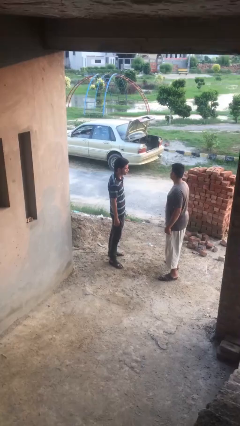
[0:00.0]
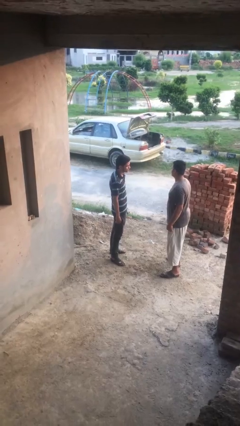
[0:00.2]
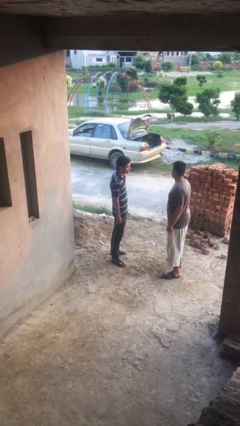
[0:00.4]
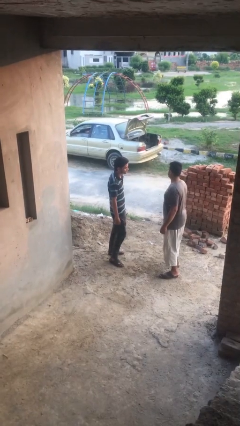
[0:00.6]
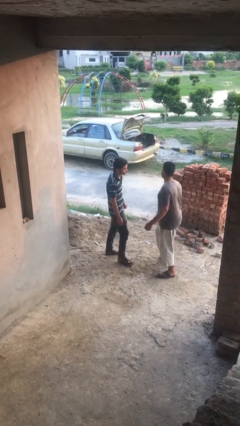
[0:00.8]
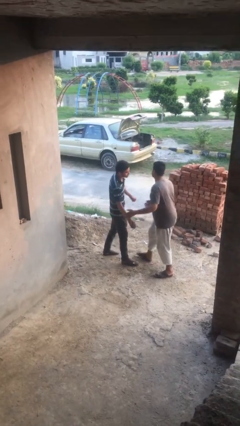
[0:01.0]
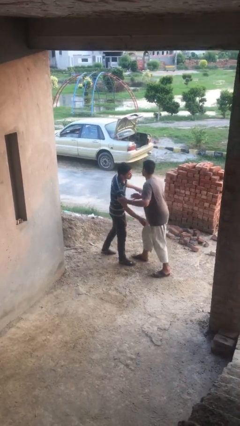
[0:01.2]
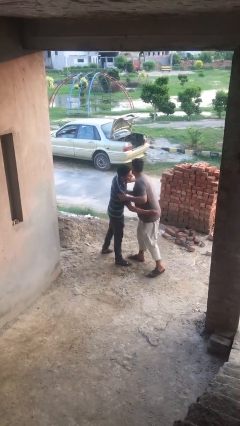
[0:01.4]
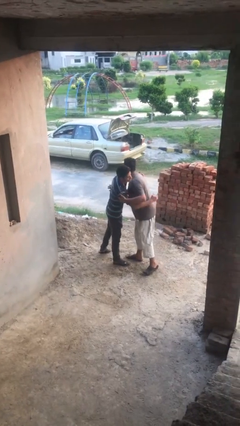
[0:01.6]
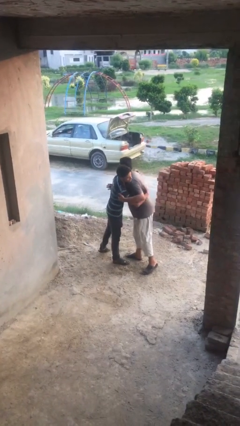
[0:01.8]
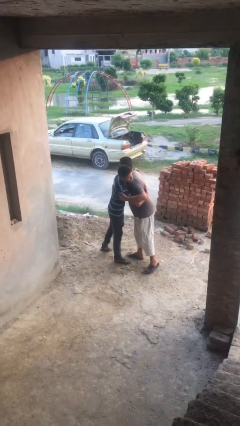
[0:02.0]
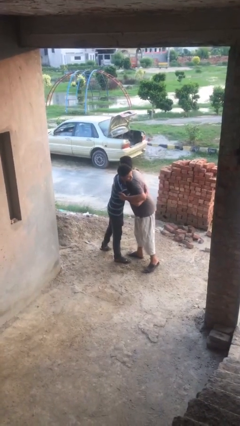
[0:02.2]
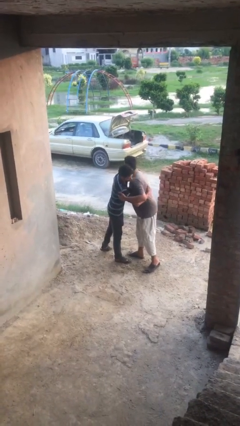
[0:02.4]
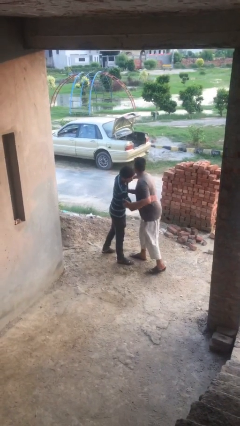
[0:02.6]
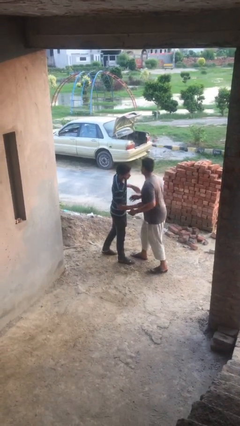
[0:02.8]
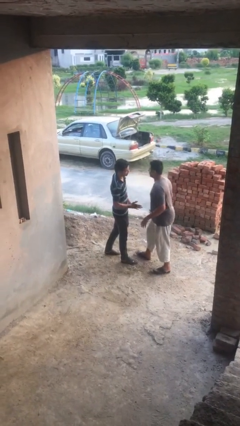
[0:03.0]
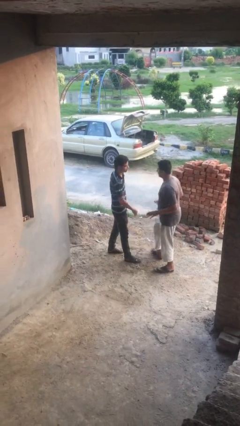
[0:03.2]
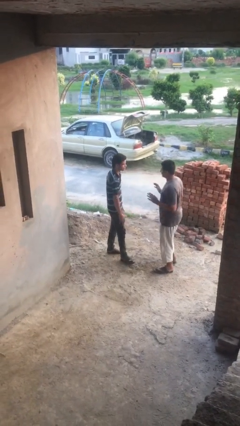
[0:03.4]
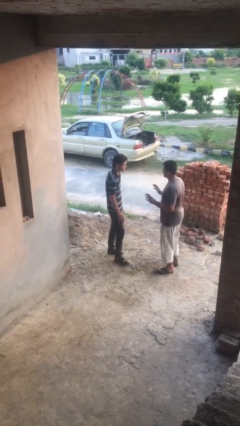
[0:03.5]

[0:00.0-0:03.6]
person embraces person

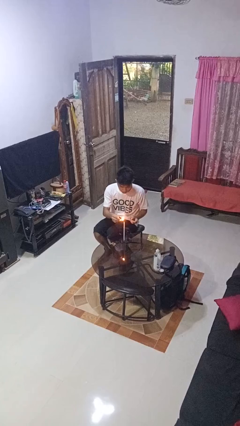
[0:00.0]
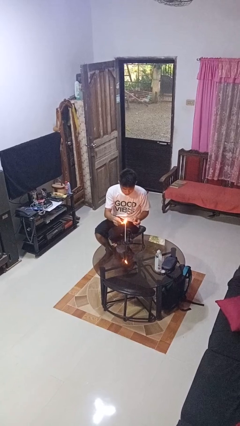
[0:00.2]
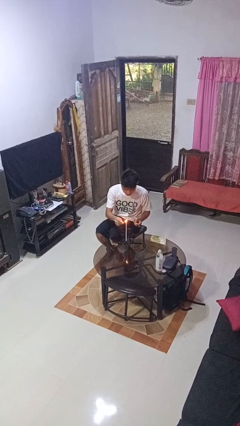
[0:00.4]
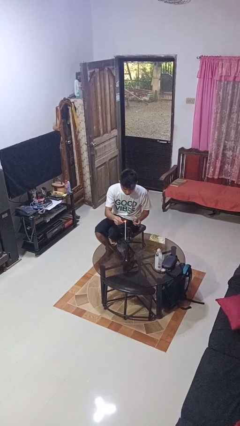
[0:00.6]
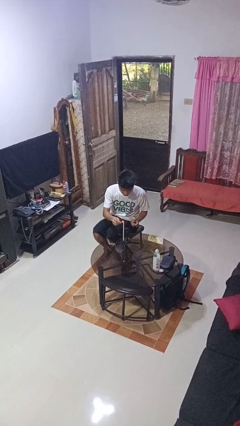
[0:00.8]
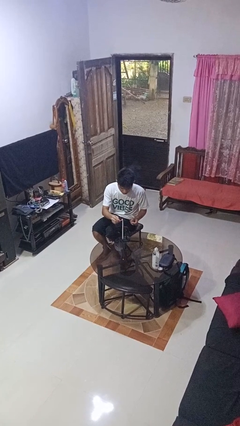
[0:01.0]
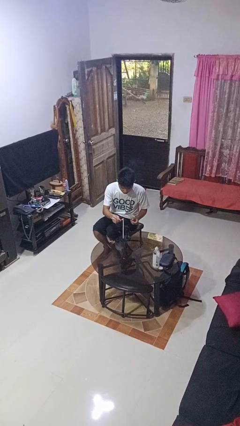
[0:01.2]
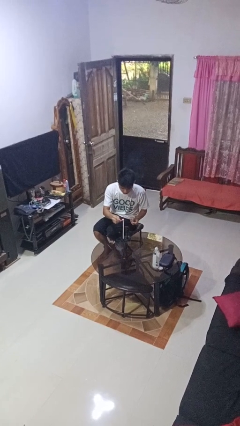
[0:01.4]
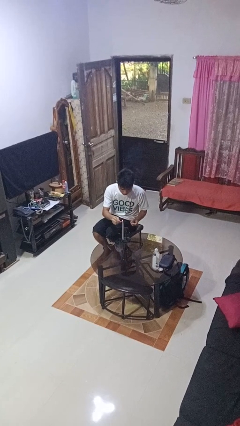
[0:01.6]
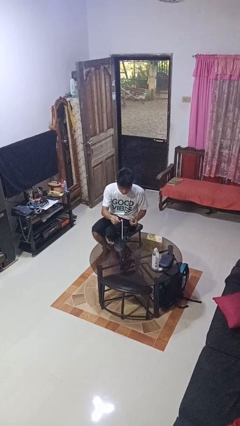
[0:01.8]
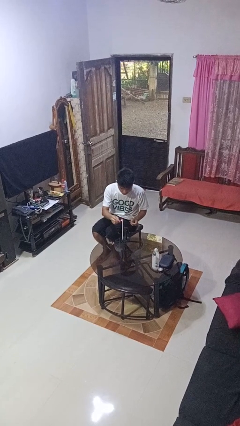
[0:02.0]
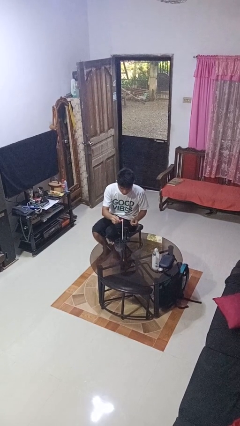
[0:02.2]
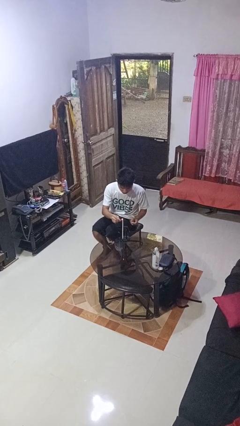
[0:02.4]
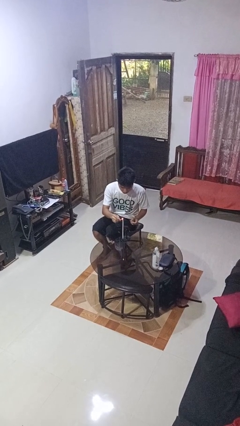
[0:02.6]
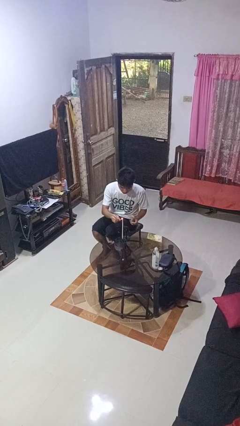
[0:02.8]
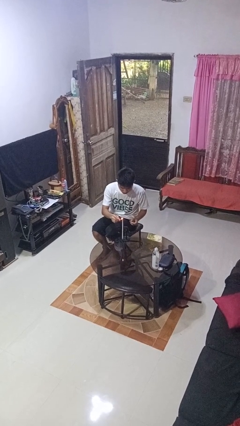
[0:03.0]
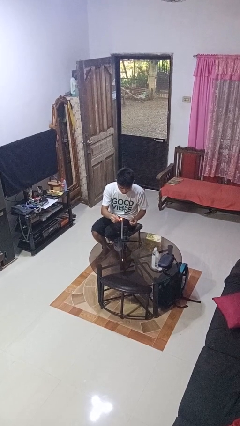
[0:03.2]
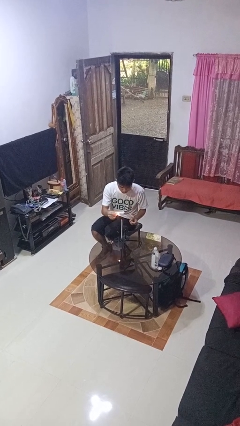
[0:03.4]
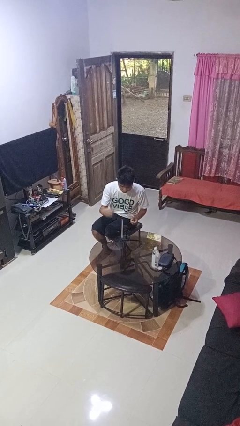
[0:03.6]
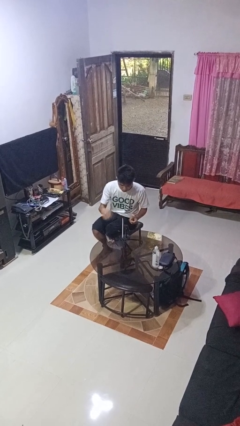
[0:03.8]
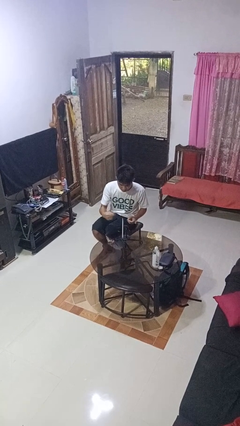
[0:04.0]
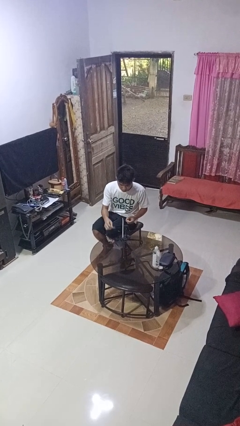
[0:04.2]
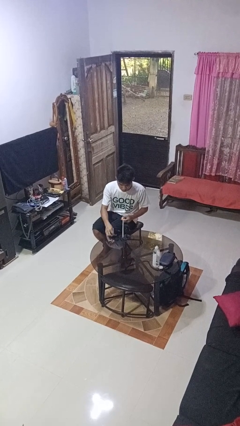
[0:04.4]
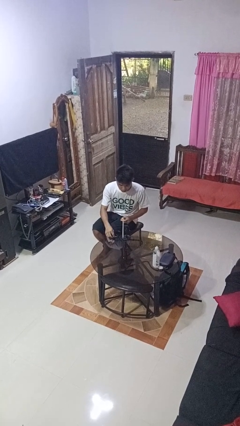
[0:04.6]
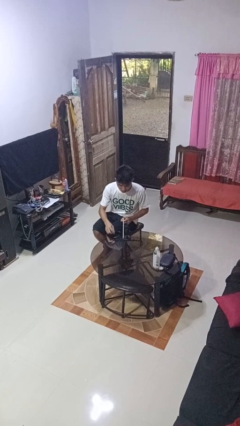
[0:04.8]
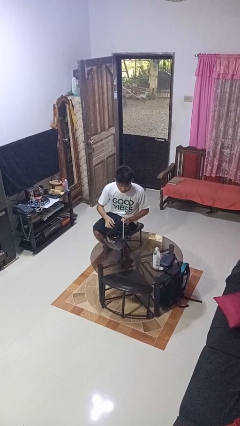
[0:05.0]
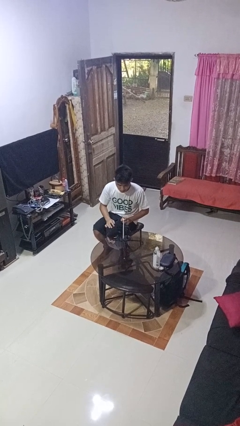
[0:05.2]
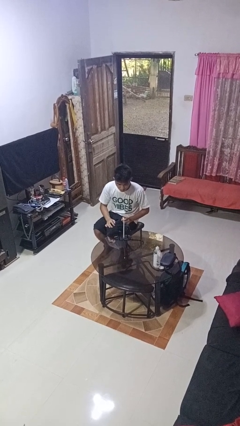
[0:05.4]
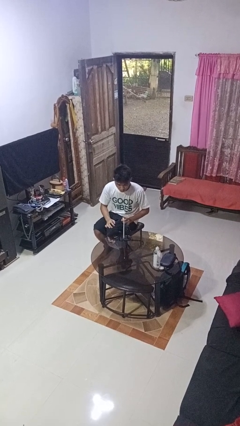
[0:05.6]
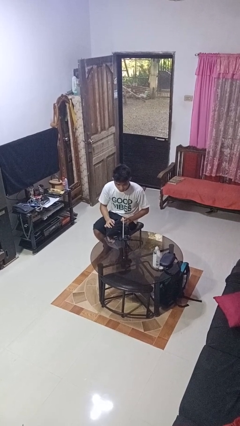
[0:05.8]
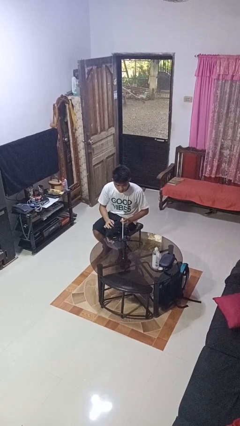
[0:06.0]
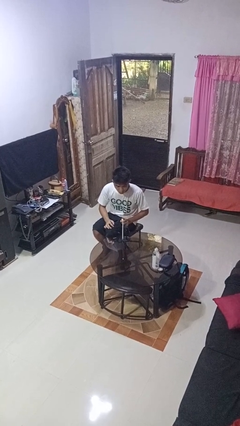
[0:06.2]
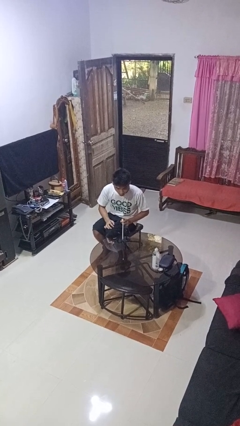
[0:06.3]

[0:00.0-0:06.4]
person lights candle

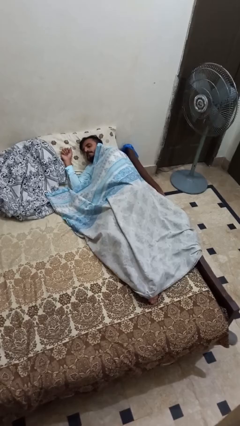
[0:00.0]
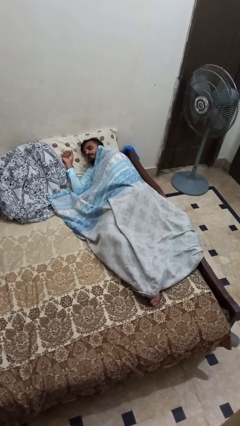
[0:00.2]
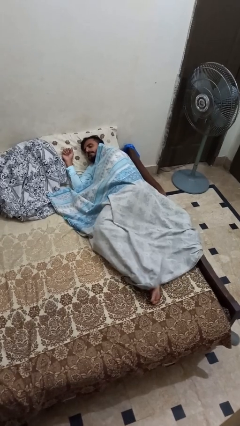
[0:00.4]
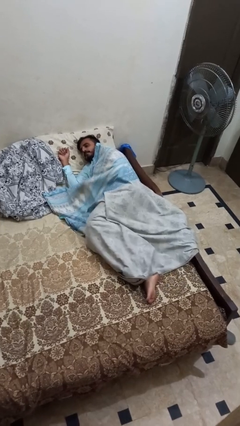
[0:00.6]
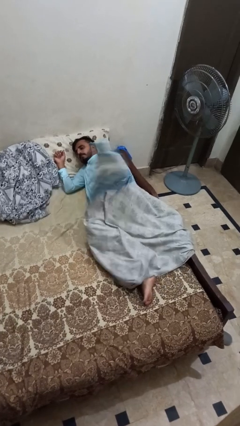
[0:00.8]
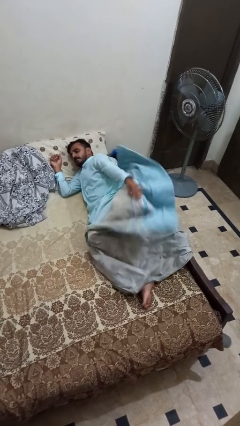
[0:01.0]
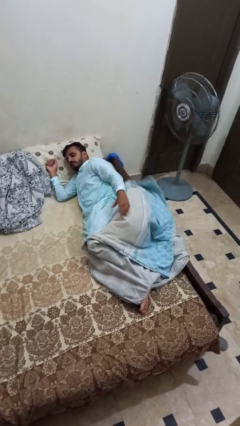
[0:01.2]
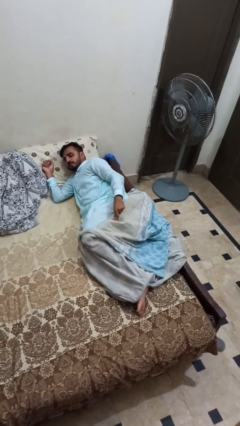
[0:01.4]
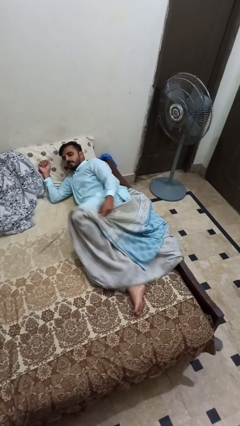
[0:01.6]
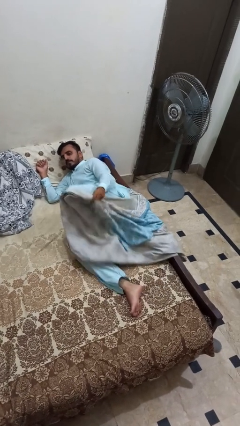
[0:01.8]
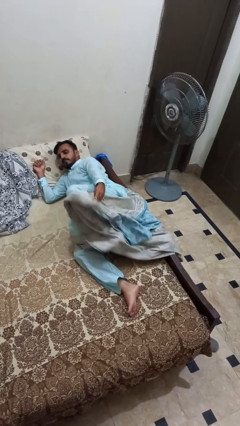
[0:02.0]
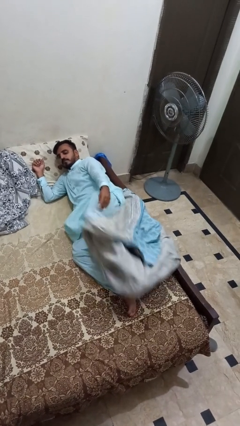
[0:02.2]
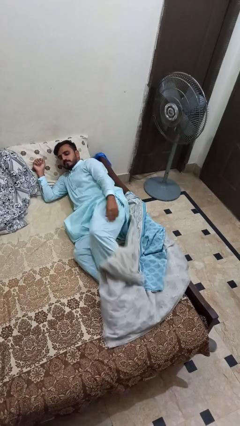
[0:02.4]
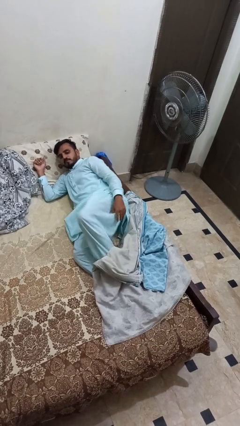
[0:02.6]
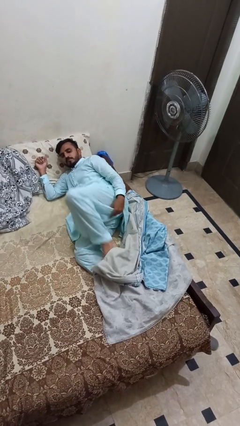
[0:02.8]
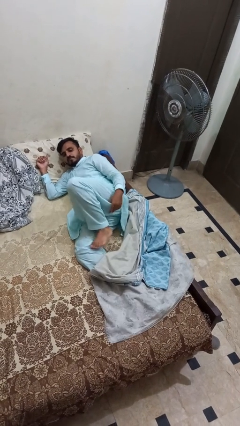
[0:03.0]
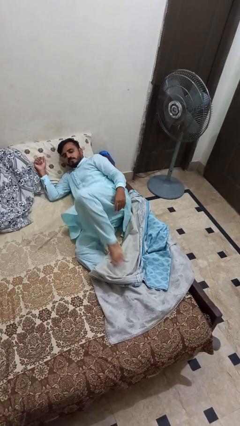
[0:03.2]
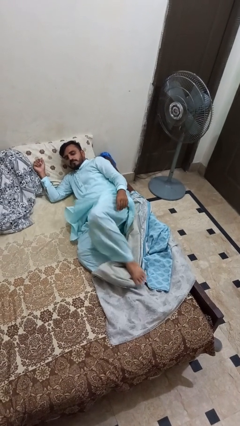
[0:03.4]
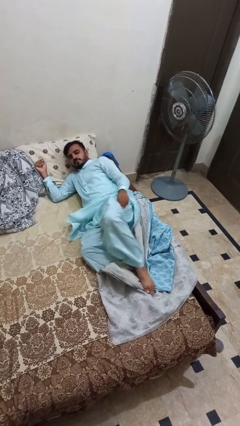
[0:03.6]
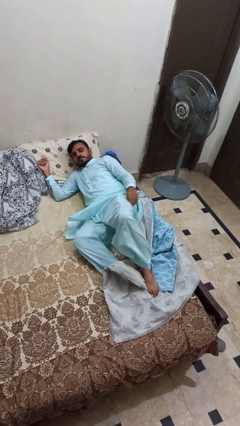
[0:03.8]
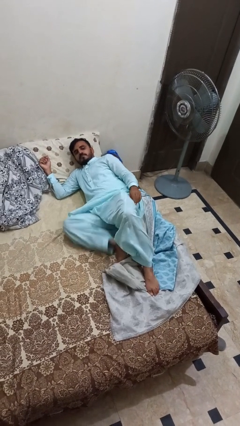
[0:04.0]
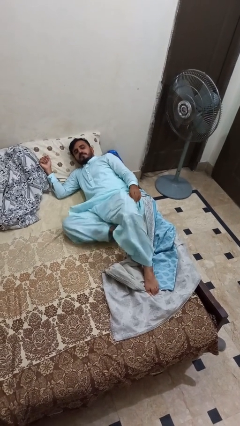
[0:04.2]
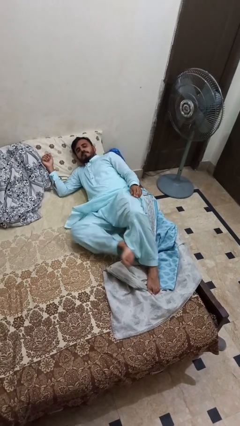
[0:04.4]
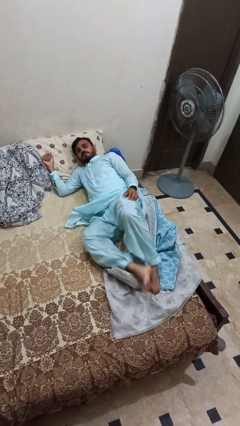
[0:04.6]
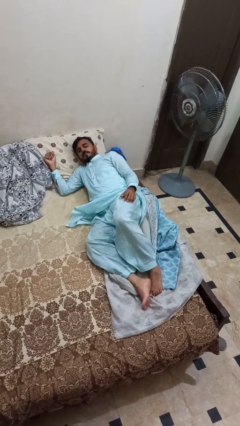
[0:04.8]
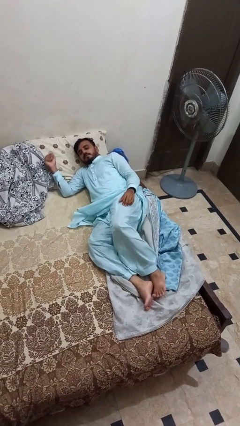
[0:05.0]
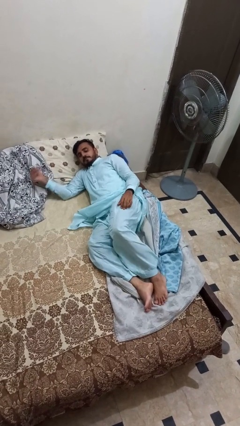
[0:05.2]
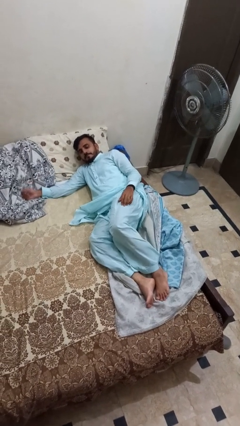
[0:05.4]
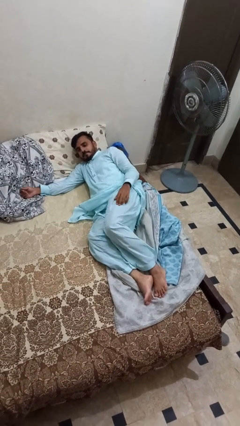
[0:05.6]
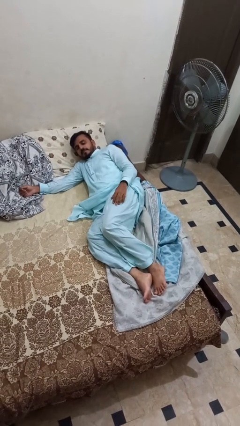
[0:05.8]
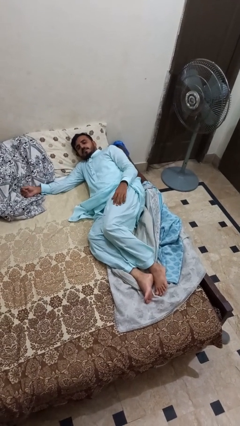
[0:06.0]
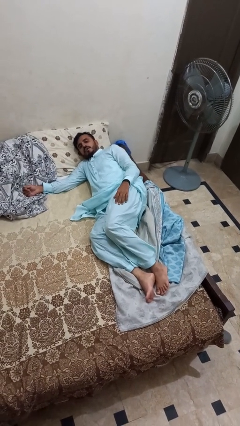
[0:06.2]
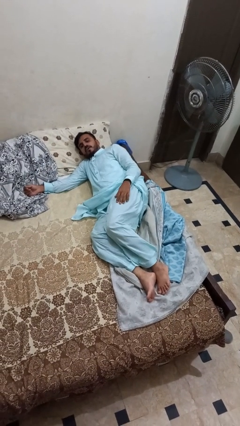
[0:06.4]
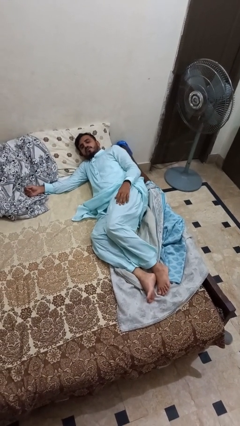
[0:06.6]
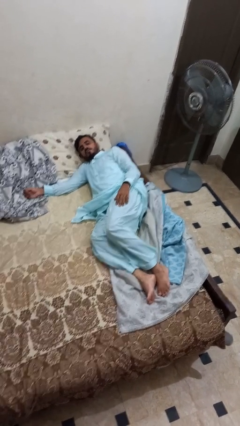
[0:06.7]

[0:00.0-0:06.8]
person uncovers with bedsheets

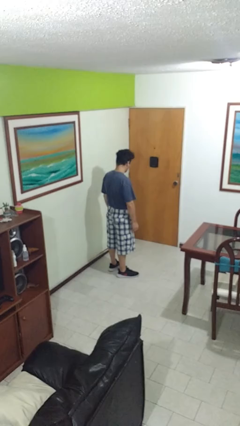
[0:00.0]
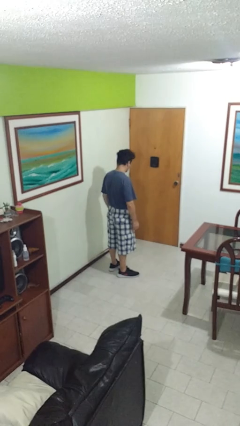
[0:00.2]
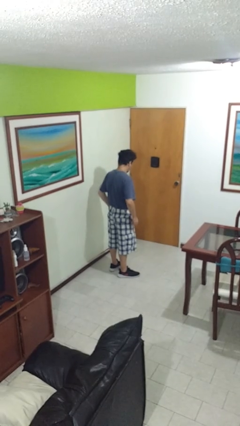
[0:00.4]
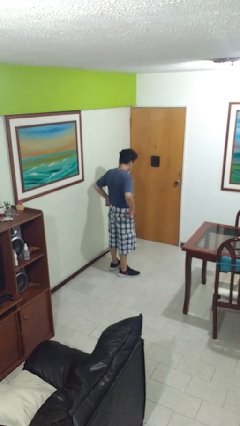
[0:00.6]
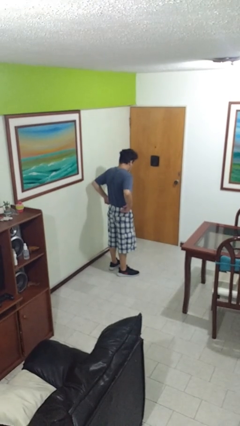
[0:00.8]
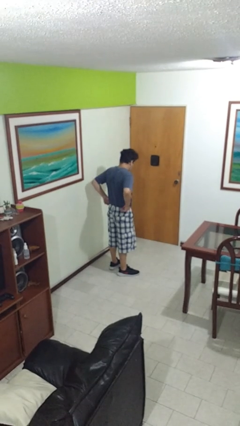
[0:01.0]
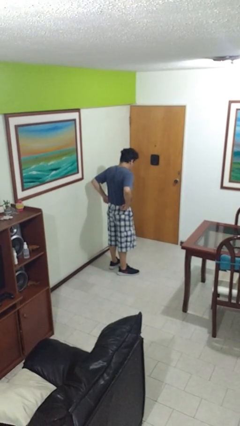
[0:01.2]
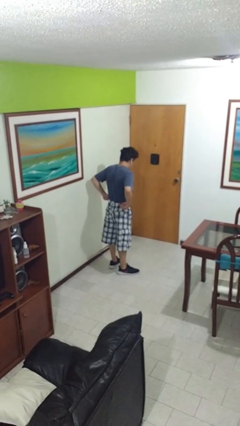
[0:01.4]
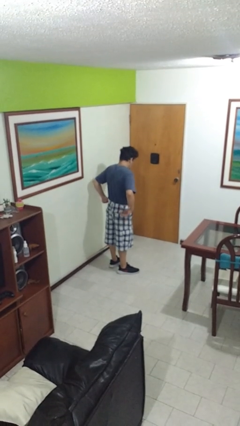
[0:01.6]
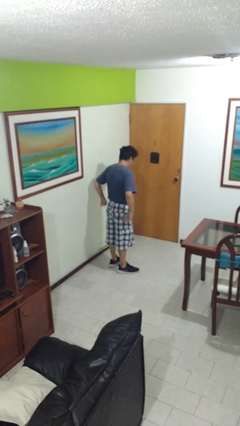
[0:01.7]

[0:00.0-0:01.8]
person hikes up pants
